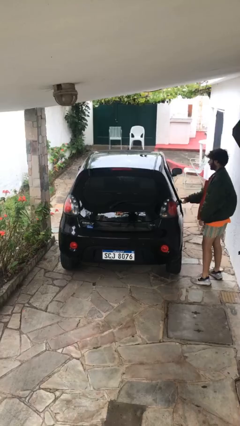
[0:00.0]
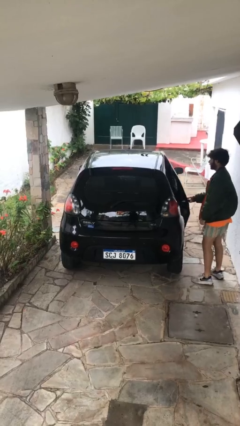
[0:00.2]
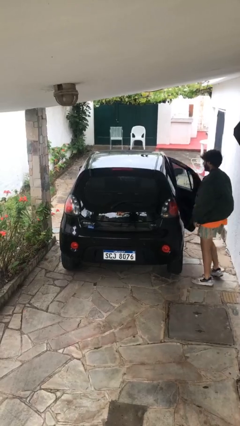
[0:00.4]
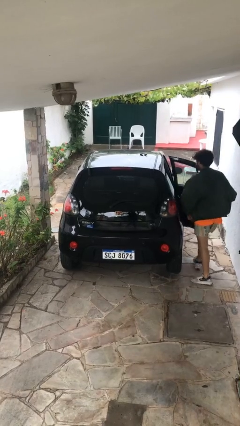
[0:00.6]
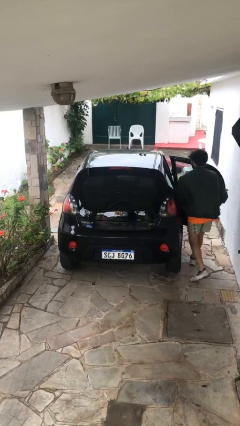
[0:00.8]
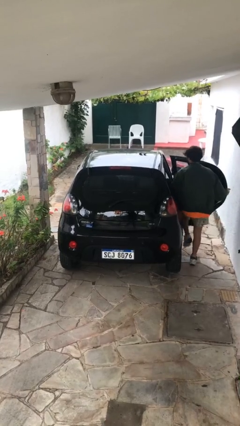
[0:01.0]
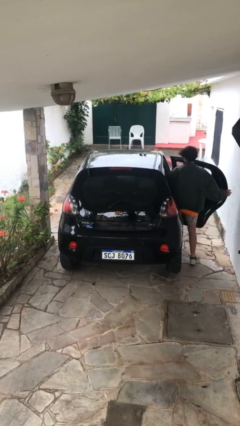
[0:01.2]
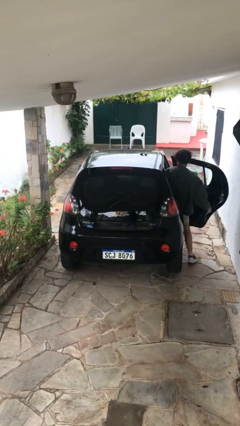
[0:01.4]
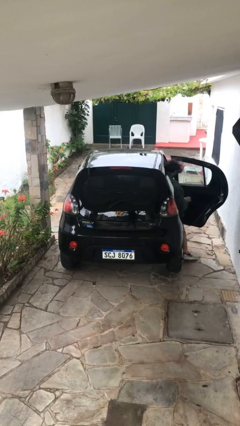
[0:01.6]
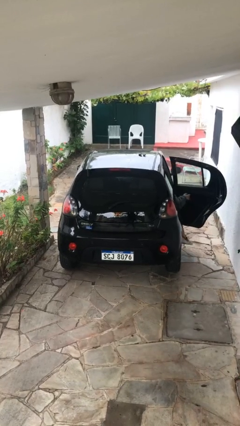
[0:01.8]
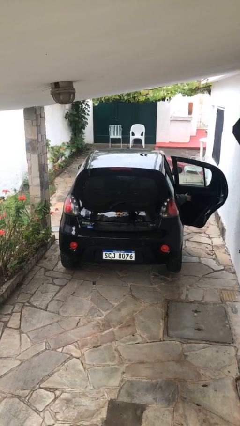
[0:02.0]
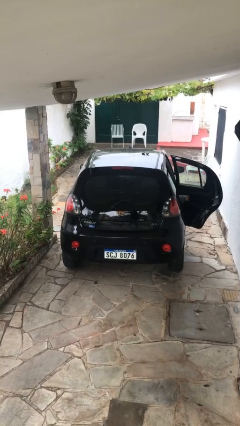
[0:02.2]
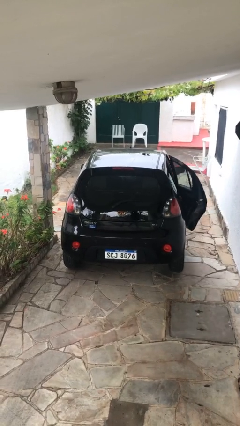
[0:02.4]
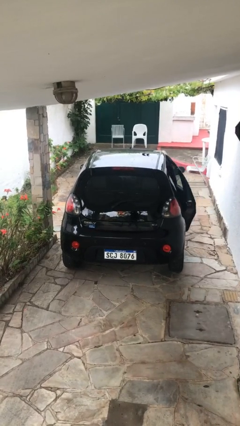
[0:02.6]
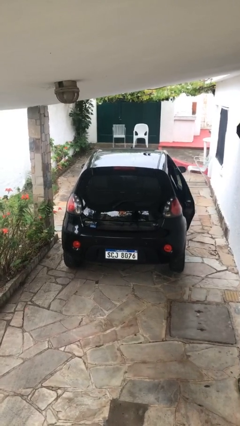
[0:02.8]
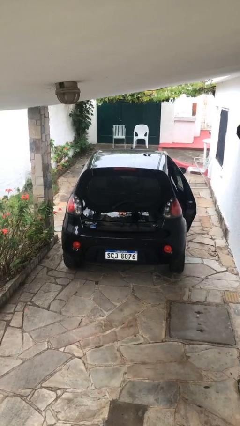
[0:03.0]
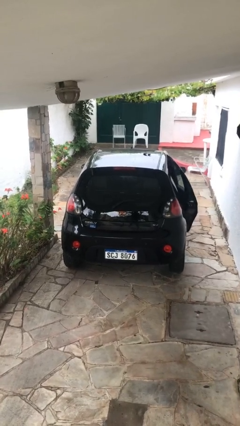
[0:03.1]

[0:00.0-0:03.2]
car picks up person

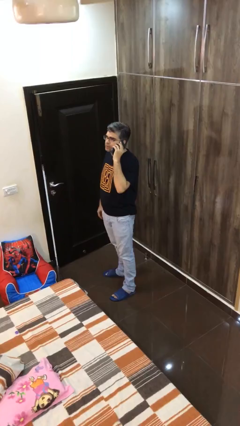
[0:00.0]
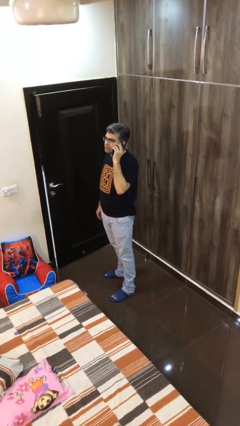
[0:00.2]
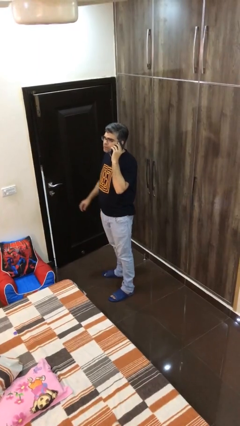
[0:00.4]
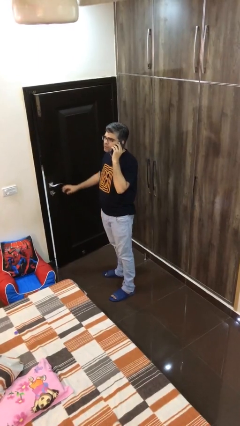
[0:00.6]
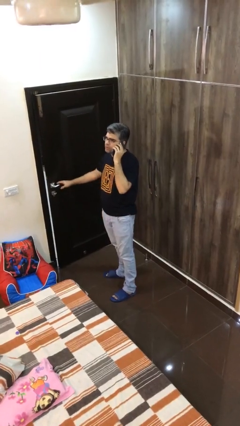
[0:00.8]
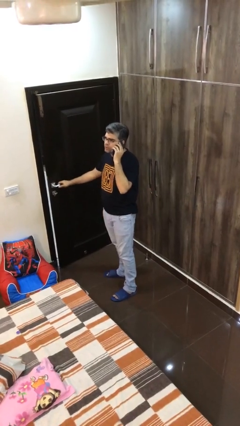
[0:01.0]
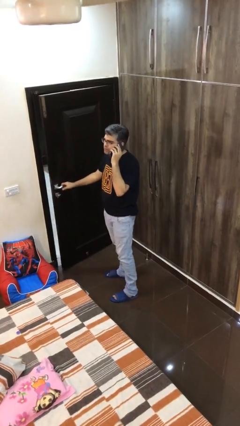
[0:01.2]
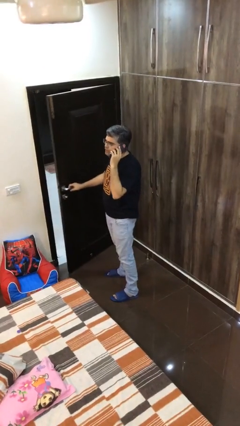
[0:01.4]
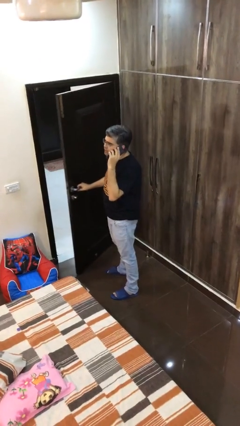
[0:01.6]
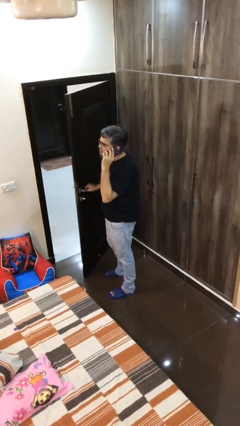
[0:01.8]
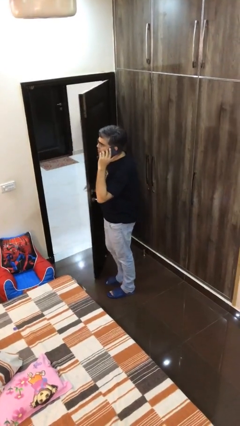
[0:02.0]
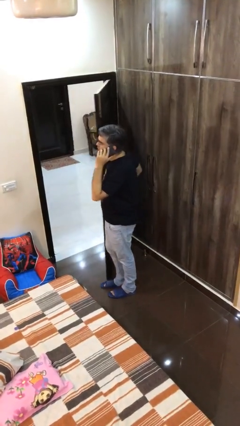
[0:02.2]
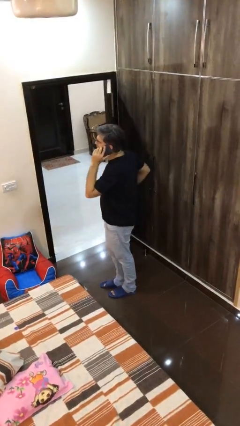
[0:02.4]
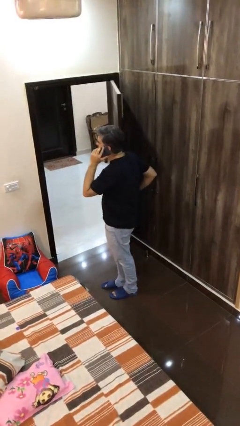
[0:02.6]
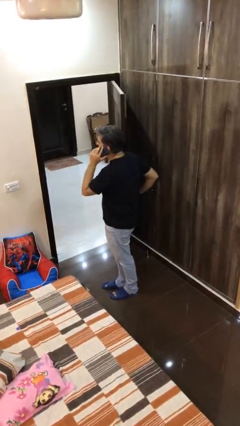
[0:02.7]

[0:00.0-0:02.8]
person opens facility door

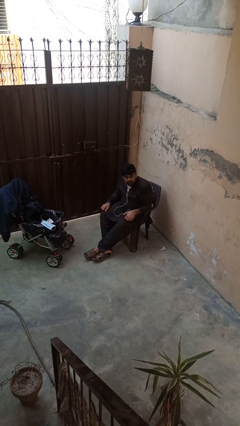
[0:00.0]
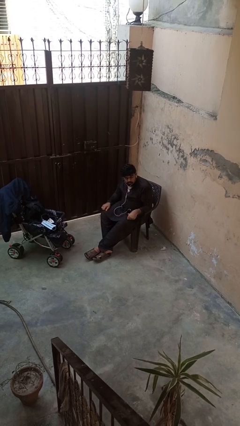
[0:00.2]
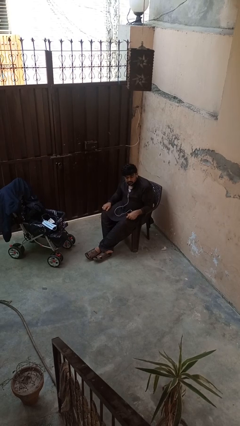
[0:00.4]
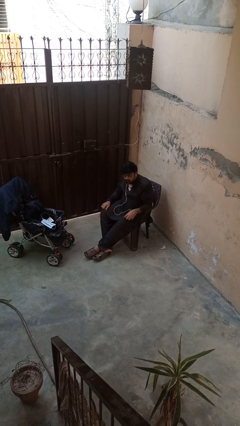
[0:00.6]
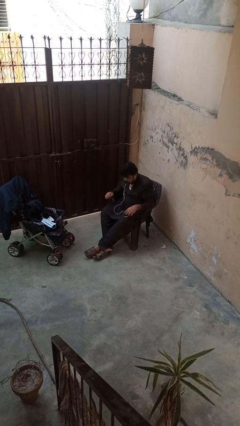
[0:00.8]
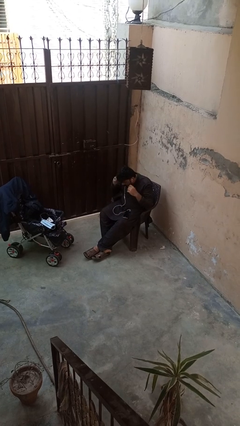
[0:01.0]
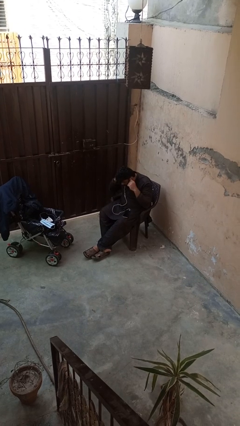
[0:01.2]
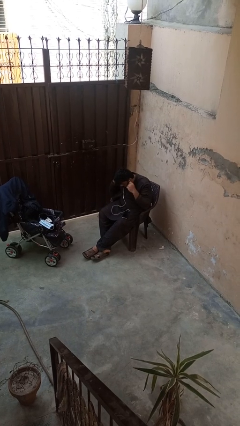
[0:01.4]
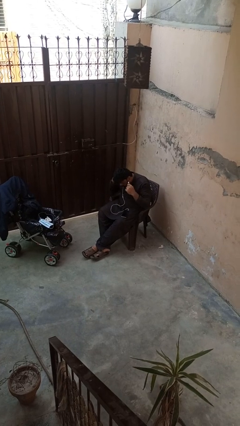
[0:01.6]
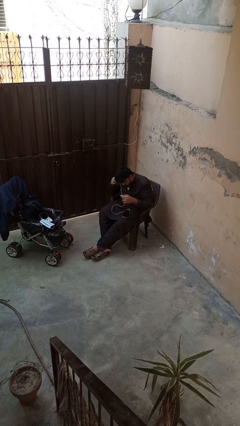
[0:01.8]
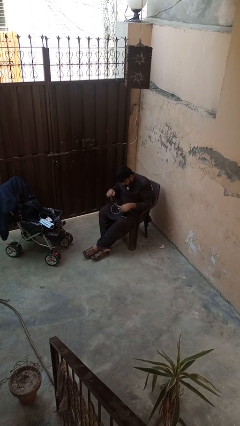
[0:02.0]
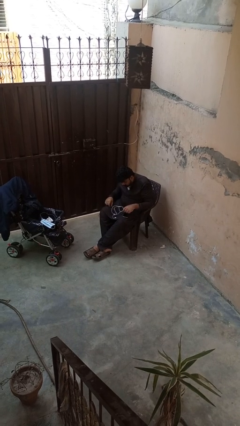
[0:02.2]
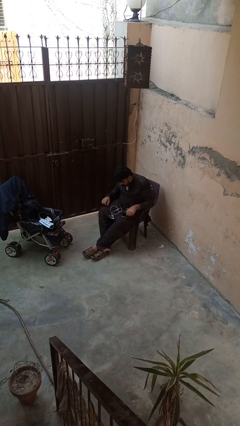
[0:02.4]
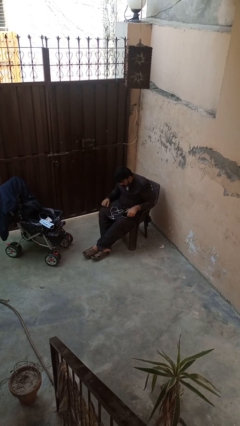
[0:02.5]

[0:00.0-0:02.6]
person takes off headphones

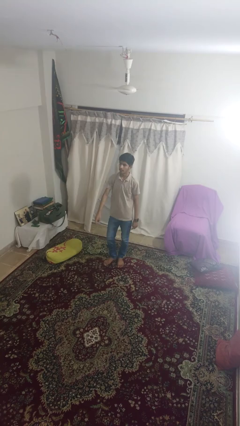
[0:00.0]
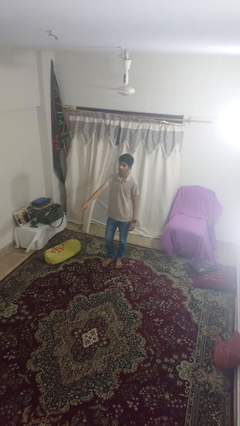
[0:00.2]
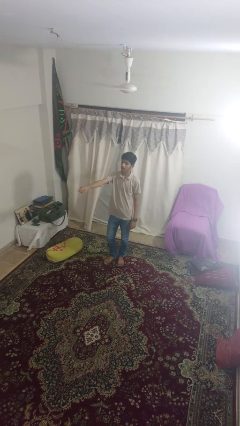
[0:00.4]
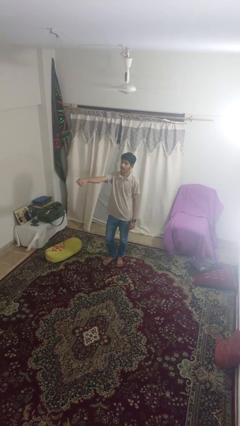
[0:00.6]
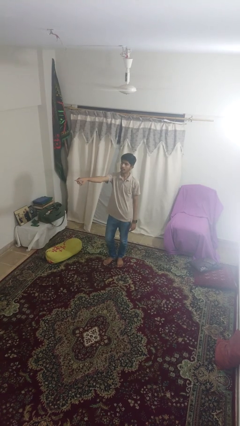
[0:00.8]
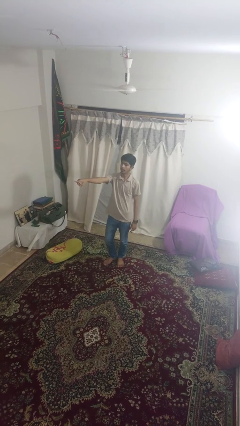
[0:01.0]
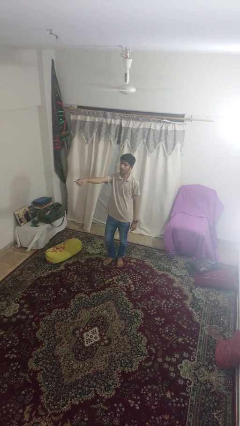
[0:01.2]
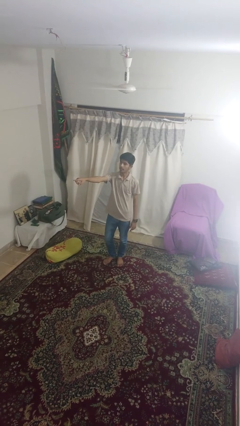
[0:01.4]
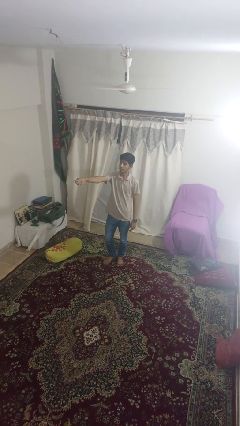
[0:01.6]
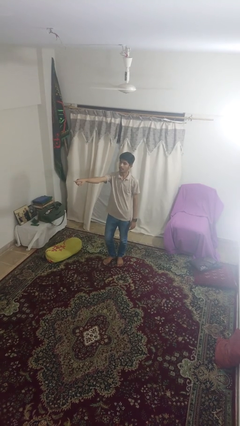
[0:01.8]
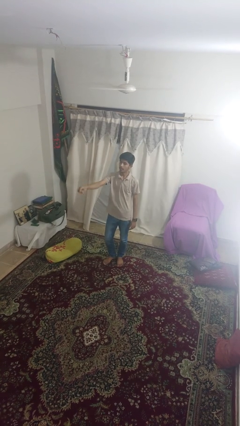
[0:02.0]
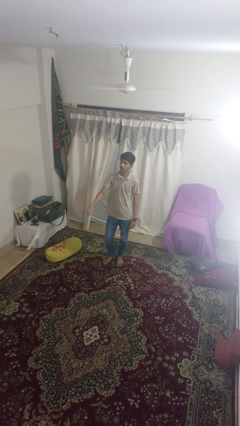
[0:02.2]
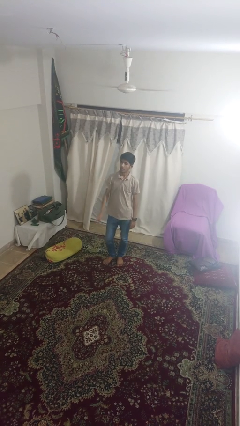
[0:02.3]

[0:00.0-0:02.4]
person points at person

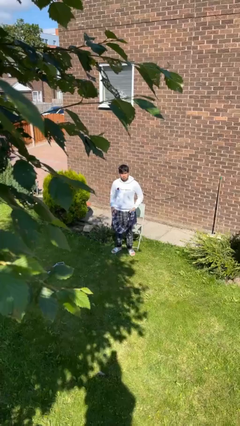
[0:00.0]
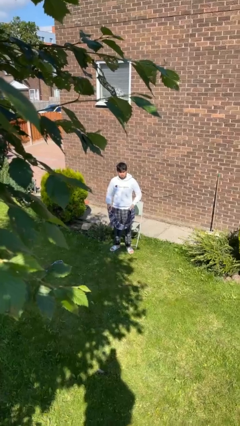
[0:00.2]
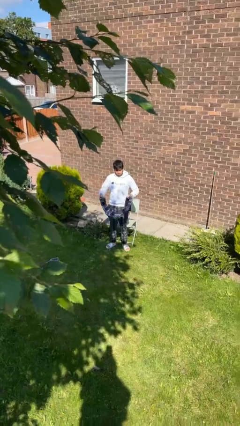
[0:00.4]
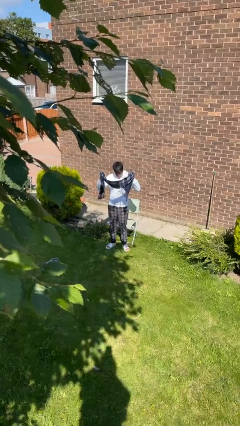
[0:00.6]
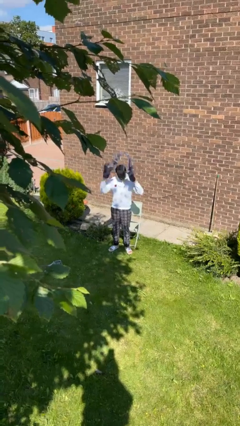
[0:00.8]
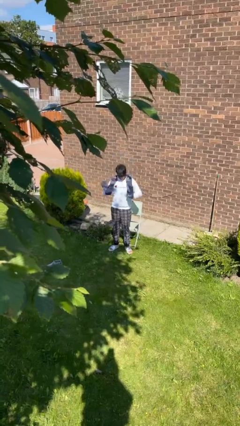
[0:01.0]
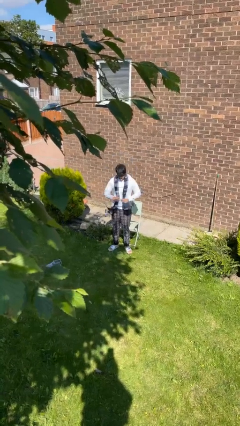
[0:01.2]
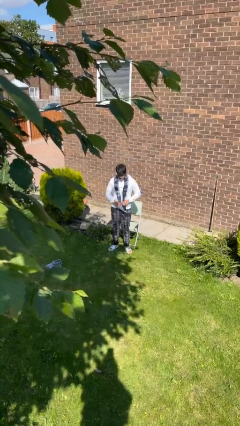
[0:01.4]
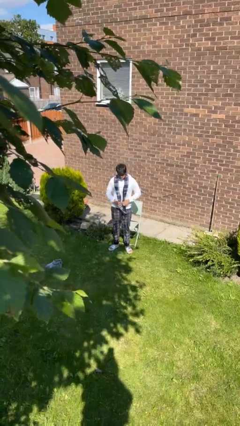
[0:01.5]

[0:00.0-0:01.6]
person puts on scarf

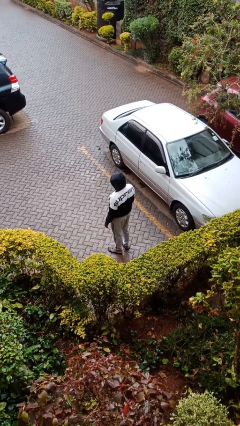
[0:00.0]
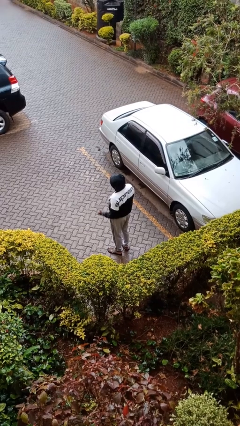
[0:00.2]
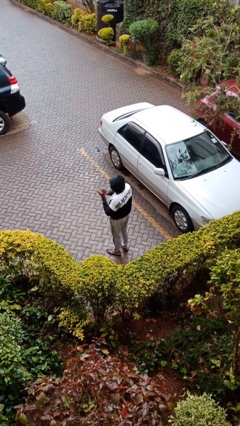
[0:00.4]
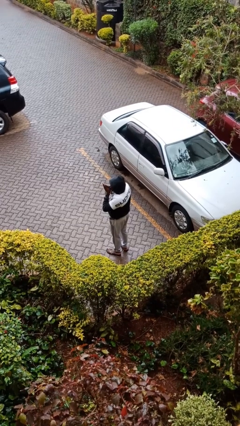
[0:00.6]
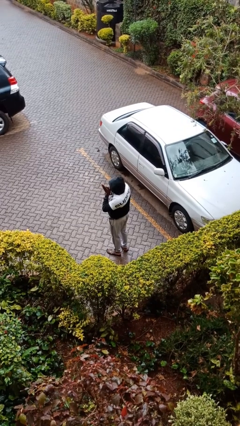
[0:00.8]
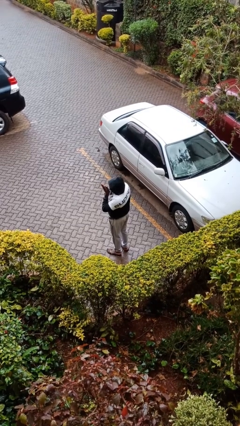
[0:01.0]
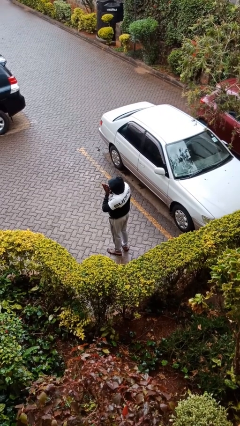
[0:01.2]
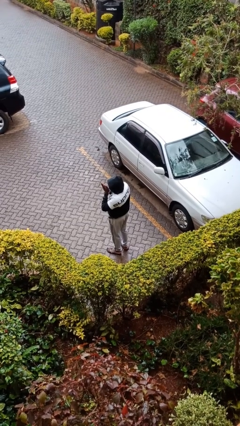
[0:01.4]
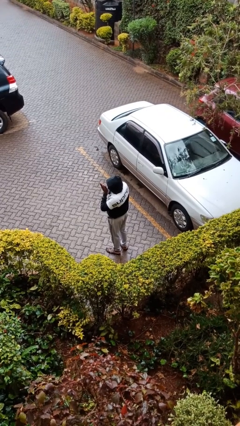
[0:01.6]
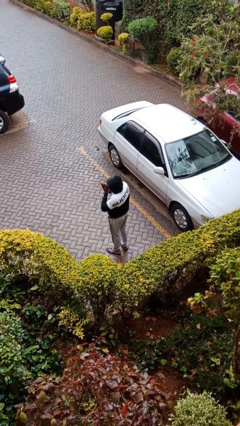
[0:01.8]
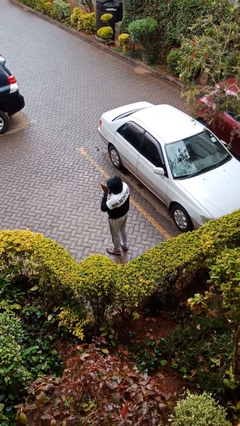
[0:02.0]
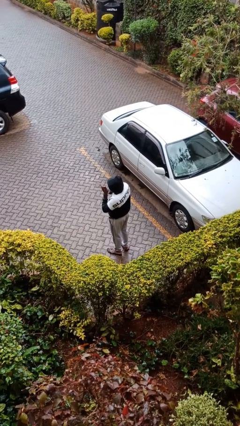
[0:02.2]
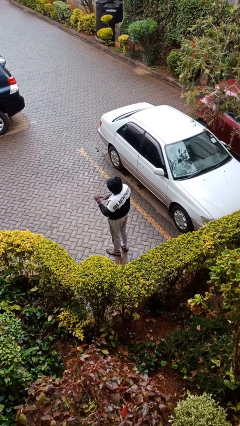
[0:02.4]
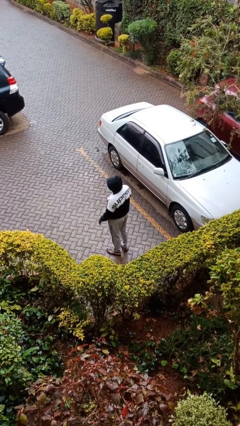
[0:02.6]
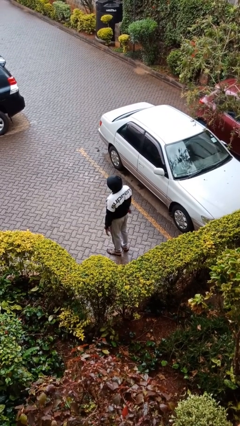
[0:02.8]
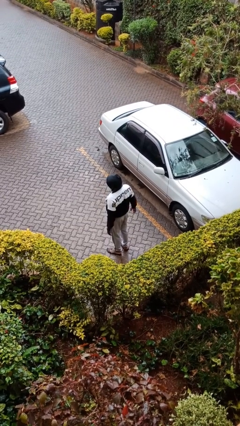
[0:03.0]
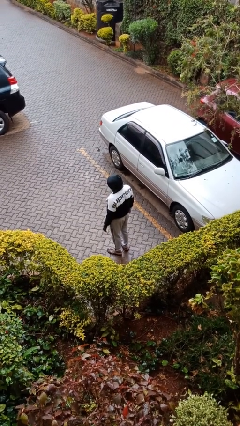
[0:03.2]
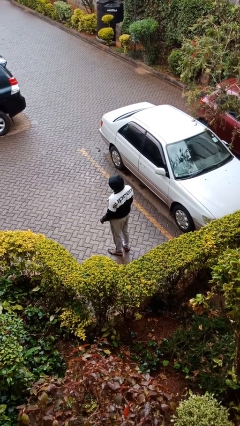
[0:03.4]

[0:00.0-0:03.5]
person blows into hands

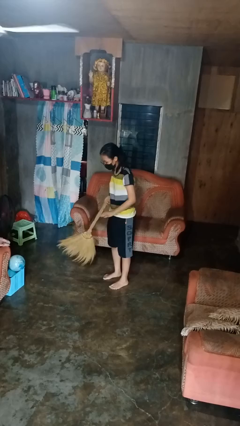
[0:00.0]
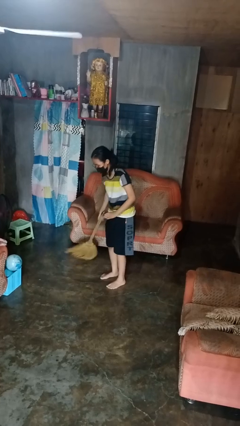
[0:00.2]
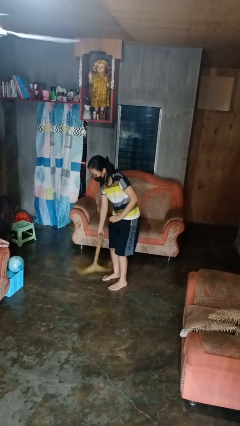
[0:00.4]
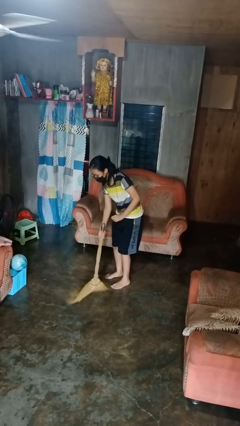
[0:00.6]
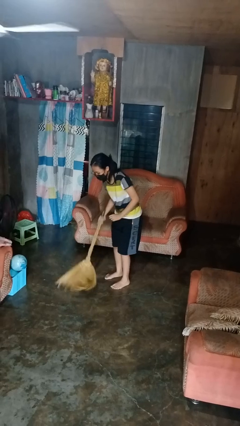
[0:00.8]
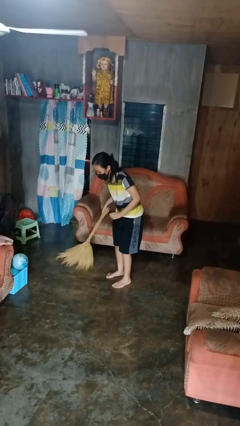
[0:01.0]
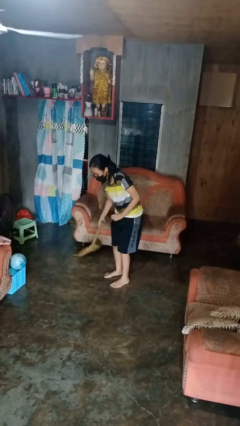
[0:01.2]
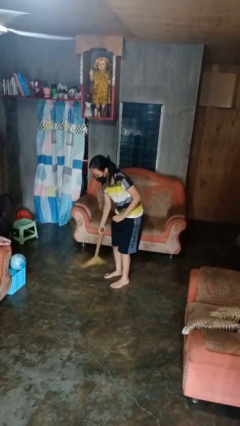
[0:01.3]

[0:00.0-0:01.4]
person sweeps floor
